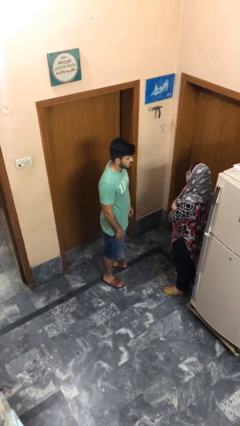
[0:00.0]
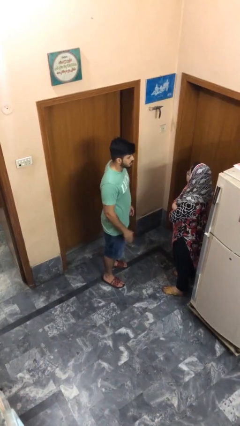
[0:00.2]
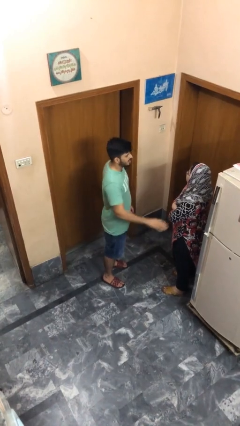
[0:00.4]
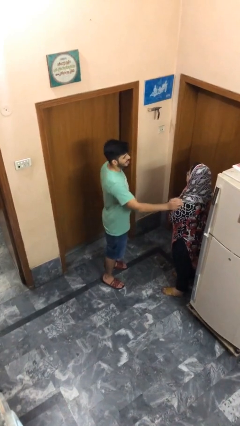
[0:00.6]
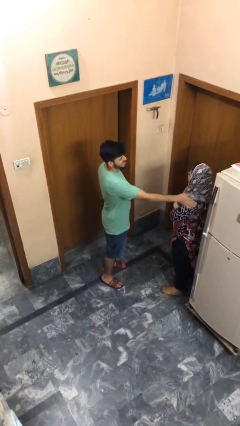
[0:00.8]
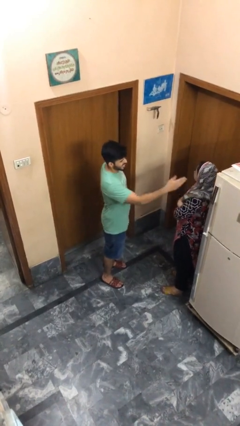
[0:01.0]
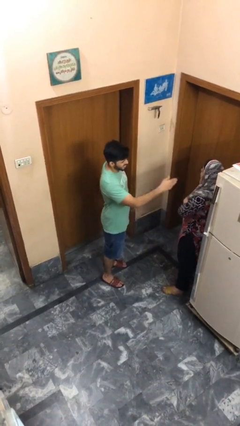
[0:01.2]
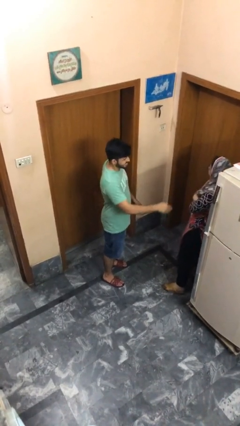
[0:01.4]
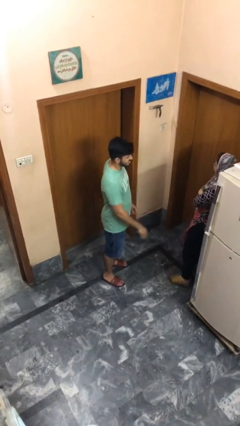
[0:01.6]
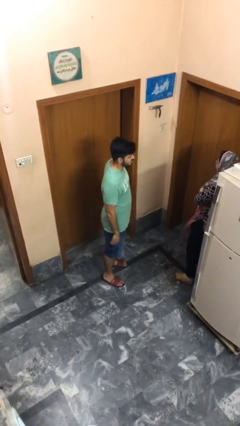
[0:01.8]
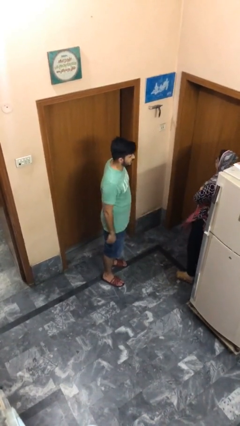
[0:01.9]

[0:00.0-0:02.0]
person shoves person

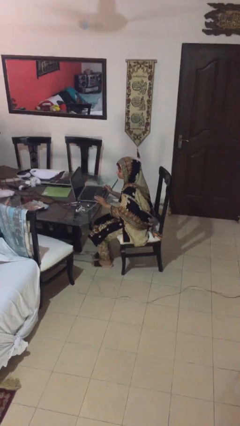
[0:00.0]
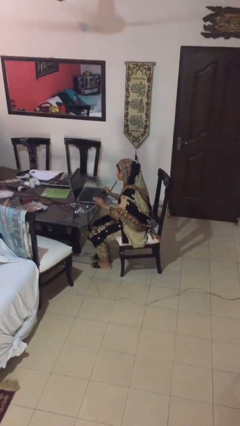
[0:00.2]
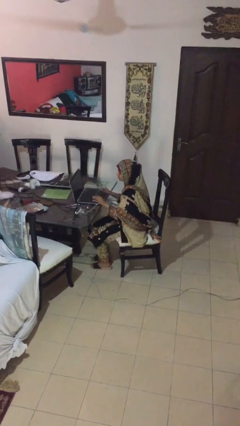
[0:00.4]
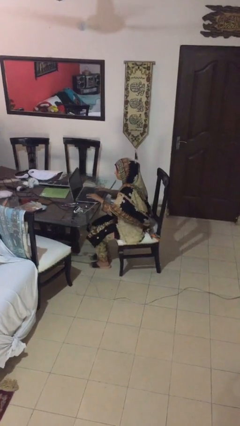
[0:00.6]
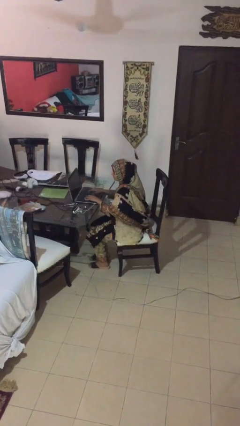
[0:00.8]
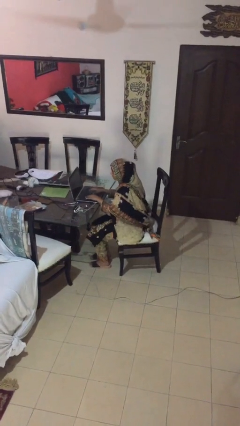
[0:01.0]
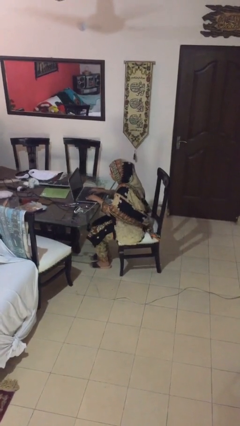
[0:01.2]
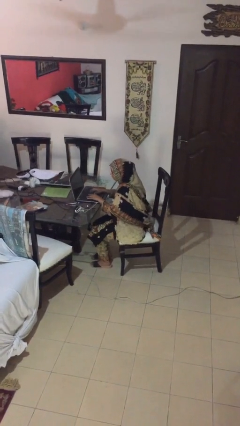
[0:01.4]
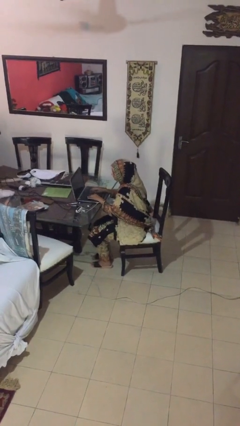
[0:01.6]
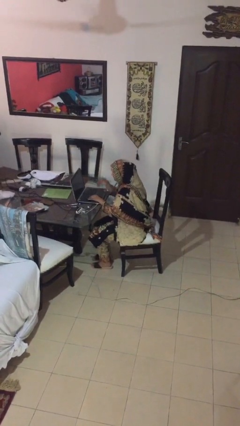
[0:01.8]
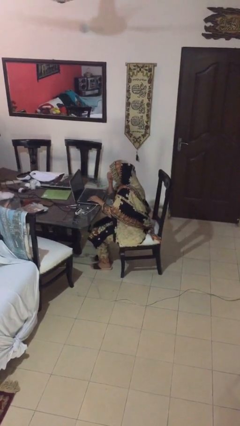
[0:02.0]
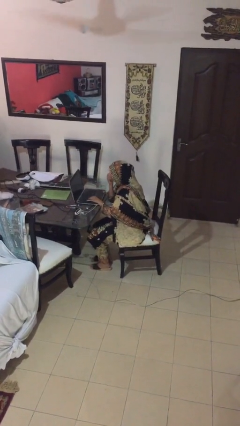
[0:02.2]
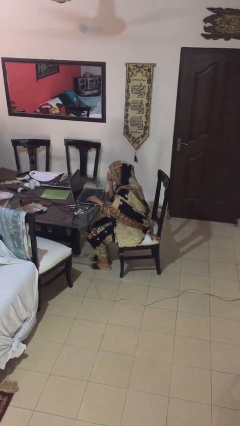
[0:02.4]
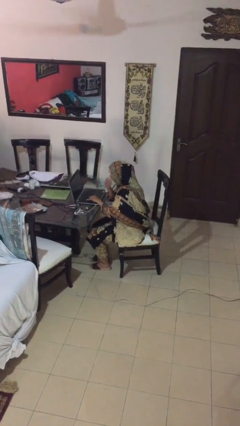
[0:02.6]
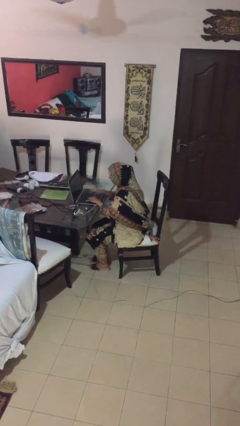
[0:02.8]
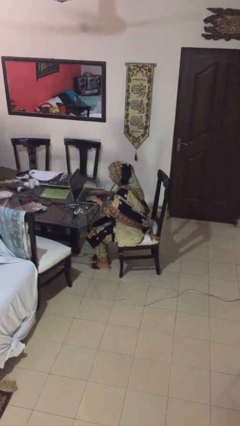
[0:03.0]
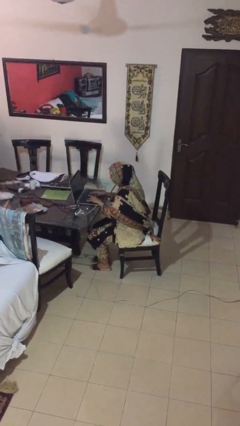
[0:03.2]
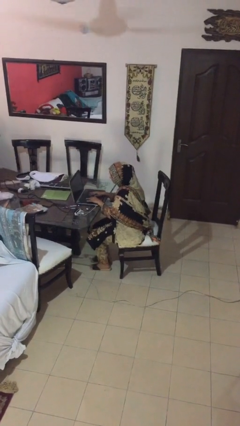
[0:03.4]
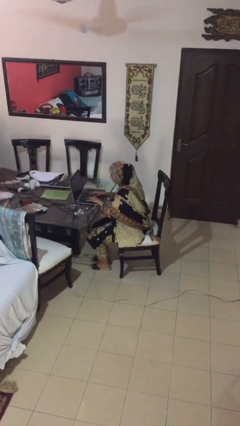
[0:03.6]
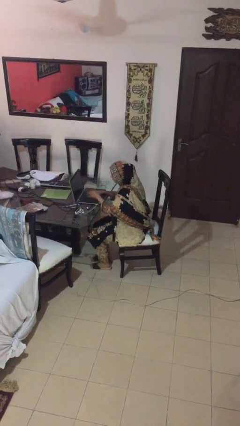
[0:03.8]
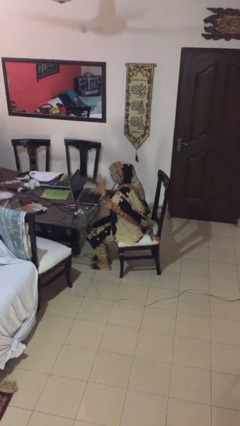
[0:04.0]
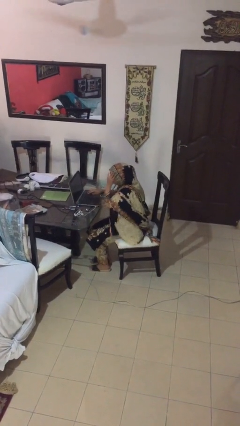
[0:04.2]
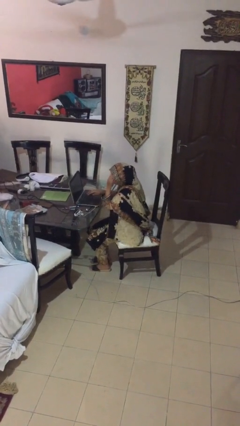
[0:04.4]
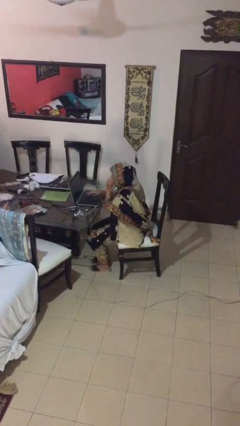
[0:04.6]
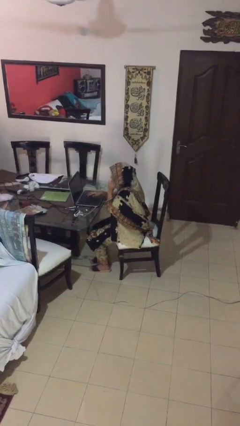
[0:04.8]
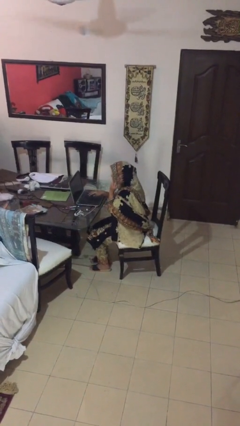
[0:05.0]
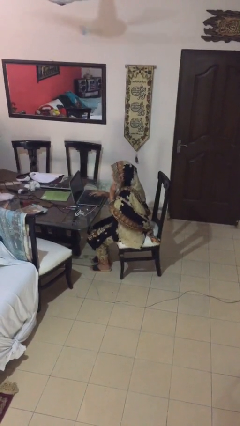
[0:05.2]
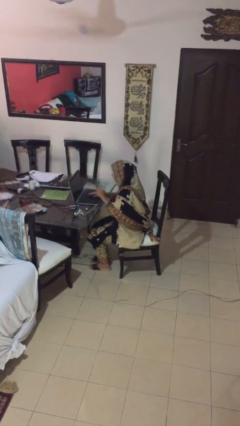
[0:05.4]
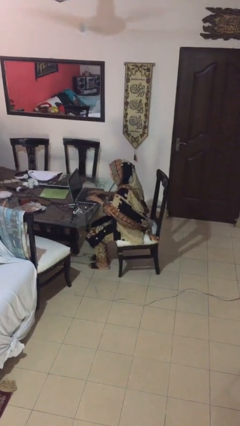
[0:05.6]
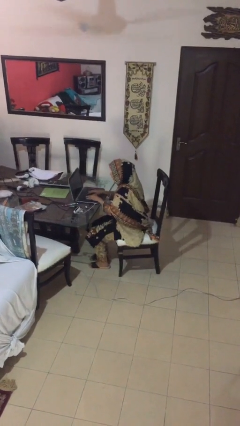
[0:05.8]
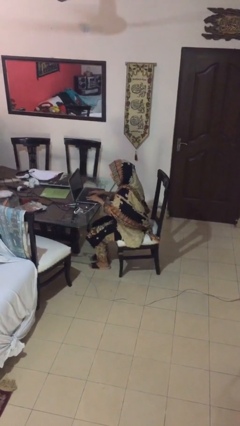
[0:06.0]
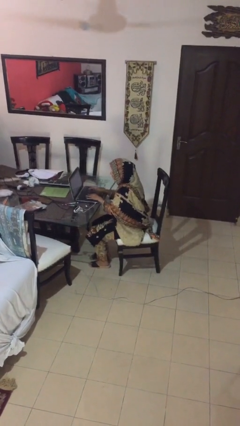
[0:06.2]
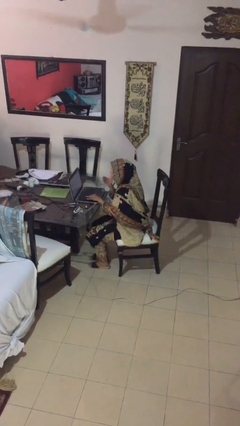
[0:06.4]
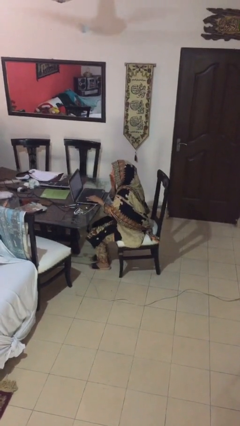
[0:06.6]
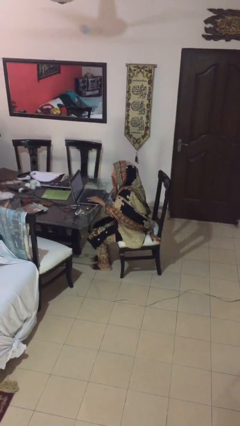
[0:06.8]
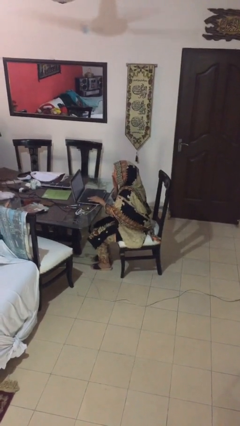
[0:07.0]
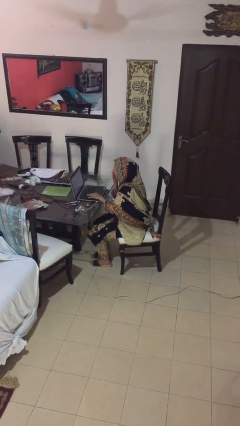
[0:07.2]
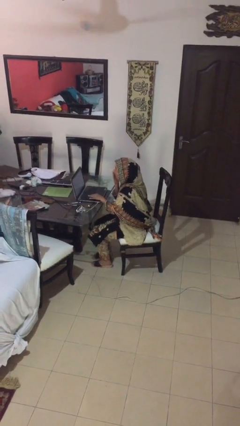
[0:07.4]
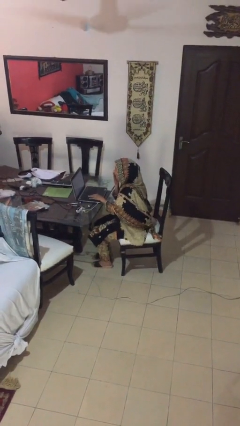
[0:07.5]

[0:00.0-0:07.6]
person interacts with laptop

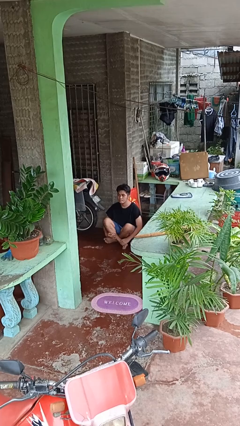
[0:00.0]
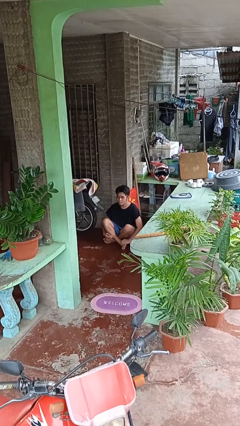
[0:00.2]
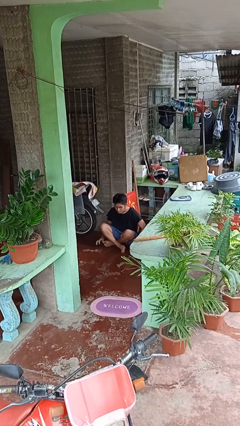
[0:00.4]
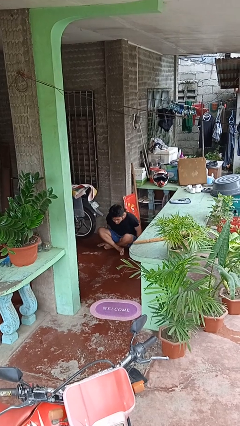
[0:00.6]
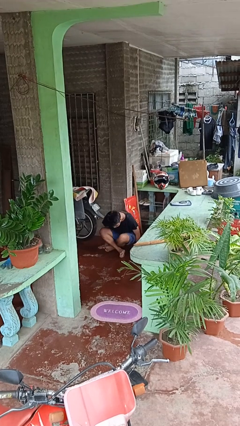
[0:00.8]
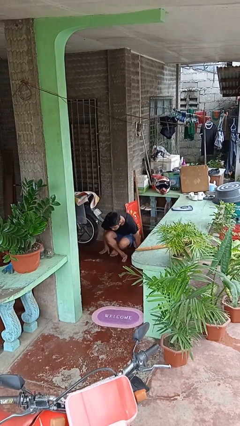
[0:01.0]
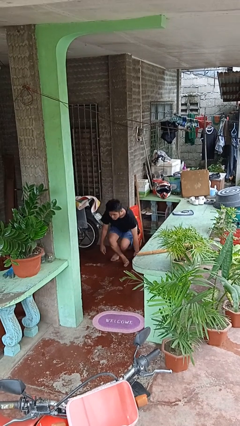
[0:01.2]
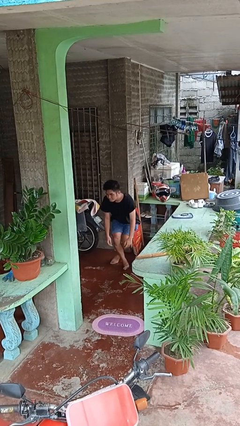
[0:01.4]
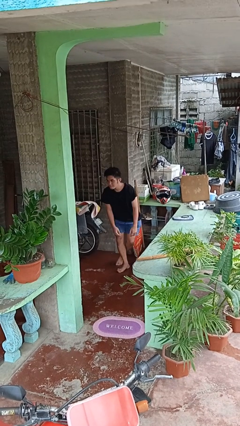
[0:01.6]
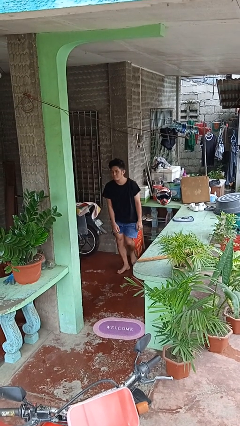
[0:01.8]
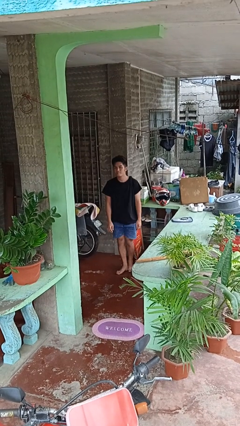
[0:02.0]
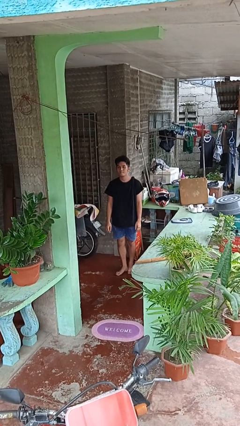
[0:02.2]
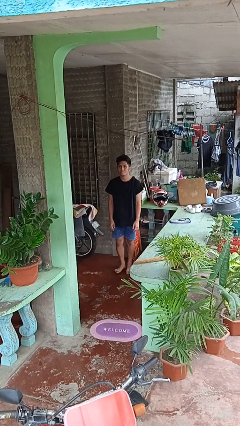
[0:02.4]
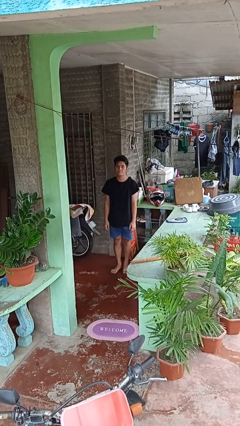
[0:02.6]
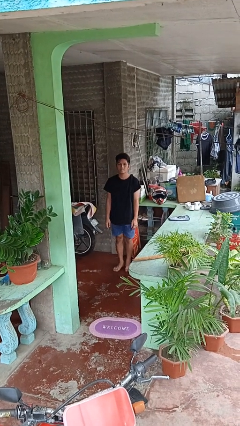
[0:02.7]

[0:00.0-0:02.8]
person stands up from floor

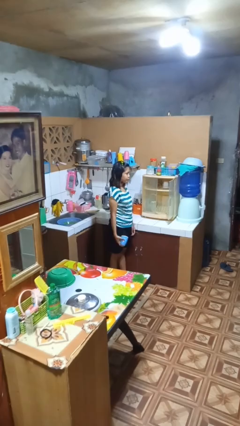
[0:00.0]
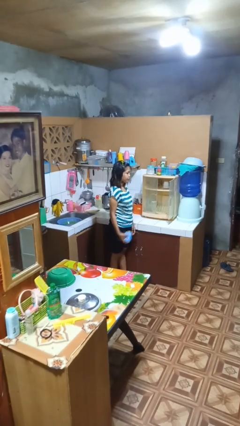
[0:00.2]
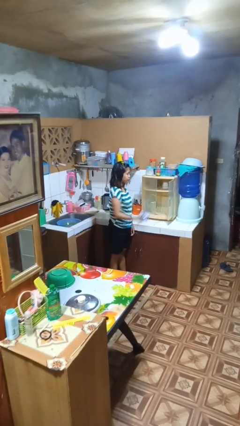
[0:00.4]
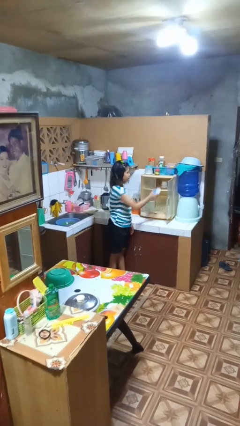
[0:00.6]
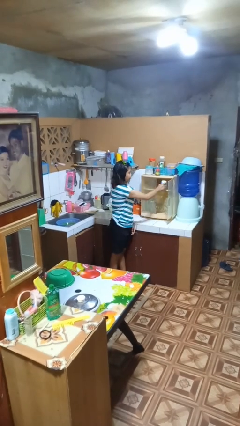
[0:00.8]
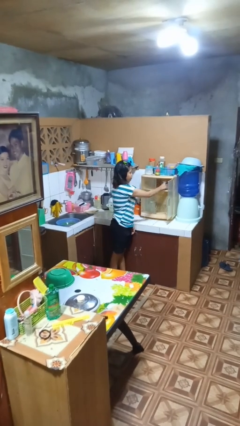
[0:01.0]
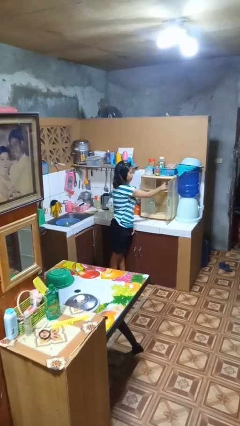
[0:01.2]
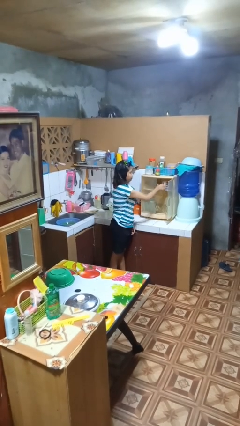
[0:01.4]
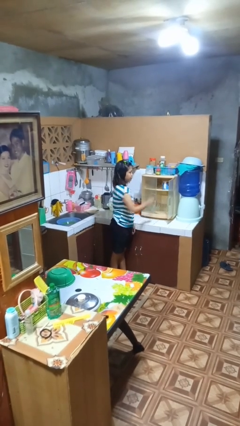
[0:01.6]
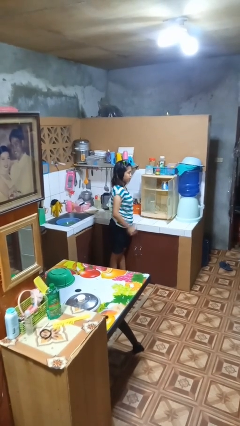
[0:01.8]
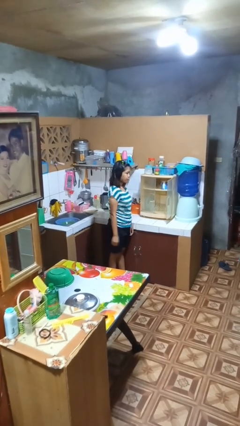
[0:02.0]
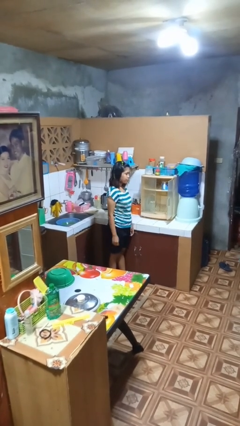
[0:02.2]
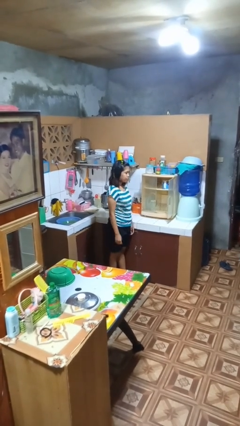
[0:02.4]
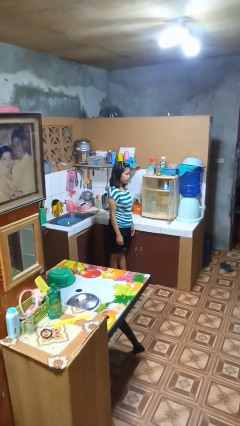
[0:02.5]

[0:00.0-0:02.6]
person puts object in cabinet

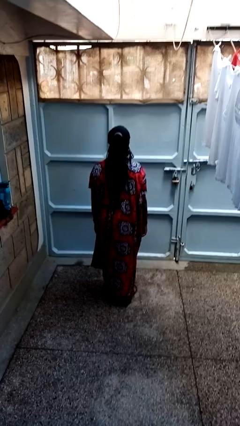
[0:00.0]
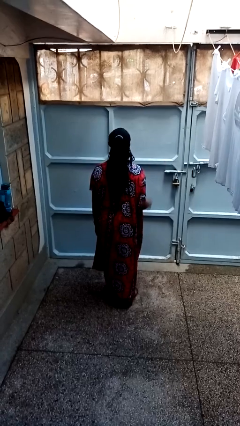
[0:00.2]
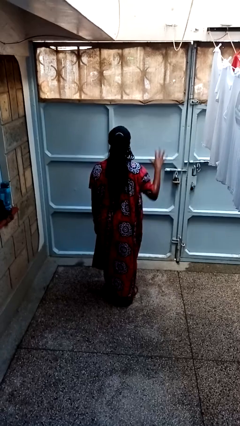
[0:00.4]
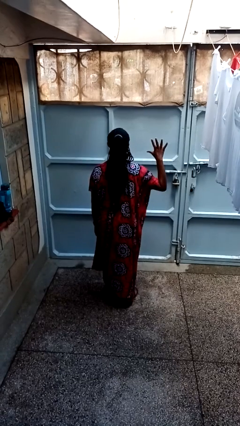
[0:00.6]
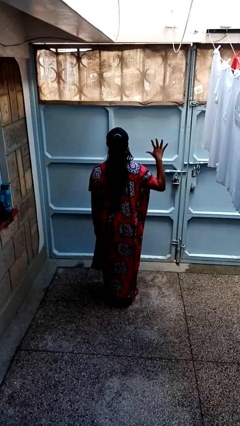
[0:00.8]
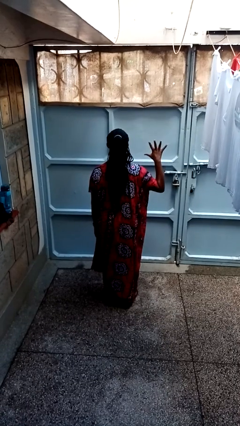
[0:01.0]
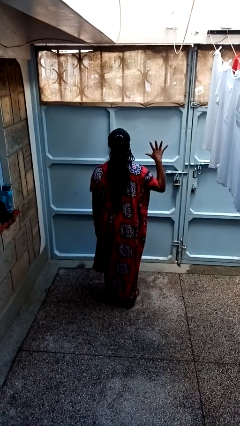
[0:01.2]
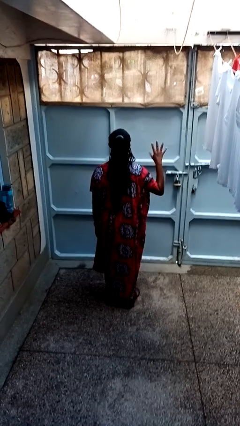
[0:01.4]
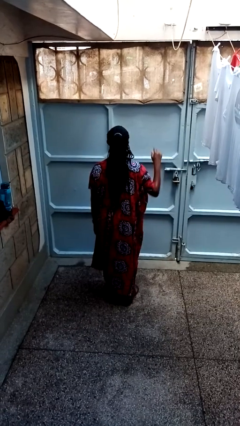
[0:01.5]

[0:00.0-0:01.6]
person gestures number five

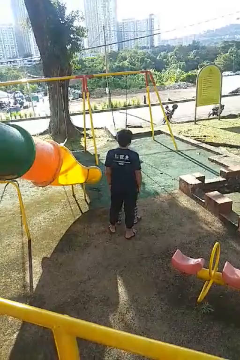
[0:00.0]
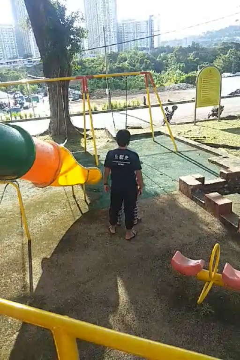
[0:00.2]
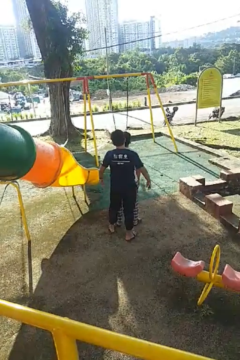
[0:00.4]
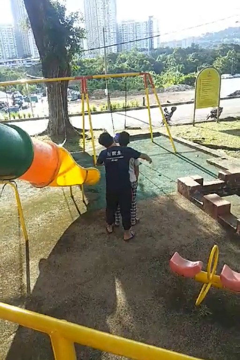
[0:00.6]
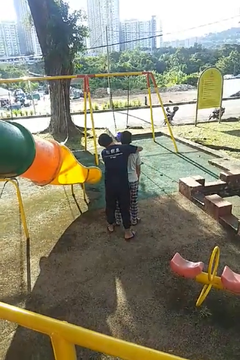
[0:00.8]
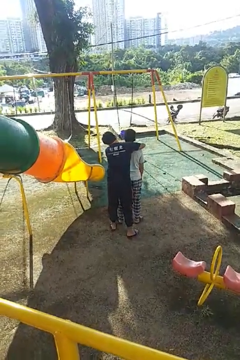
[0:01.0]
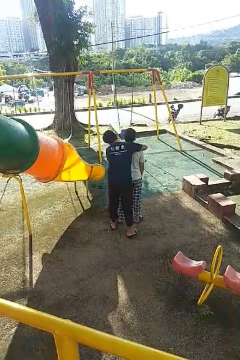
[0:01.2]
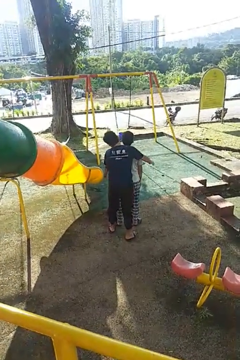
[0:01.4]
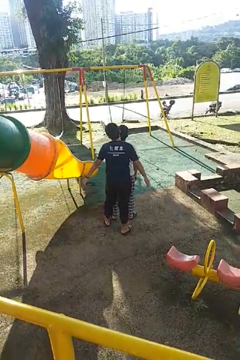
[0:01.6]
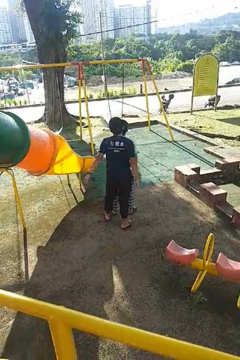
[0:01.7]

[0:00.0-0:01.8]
person hugs person from behind
